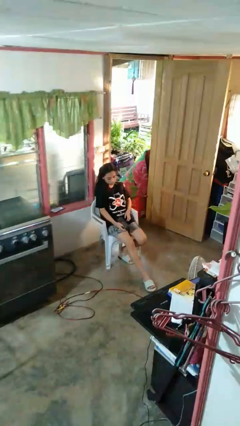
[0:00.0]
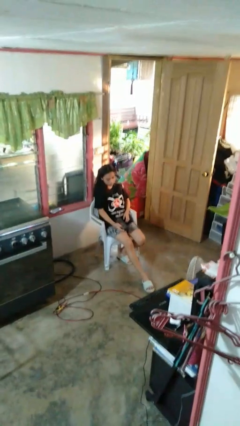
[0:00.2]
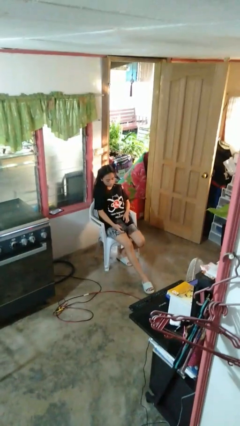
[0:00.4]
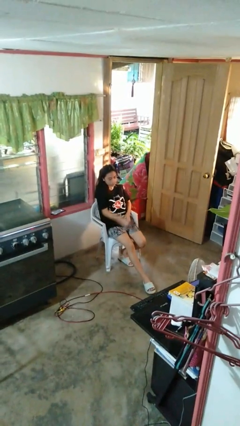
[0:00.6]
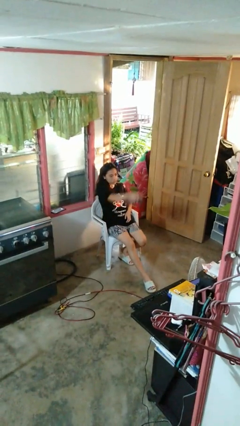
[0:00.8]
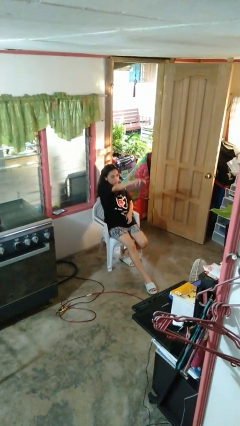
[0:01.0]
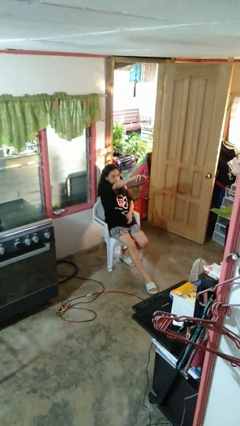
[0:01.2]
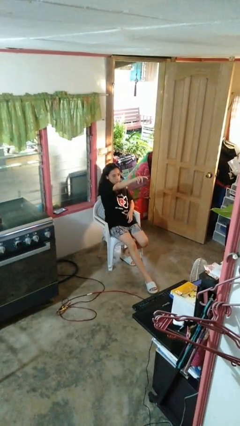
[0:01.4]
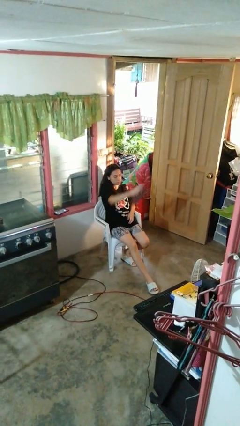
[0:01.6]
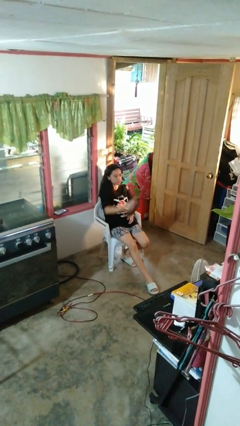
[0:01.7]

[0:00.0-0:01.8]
person uses television remote

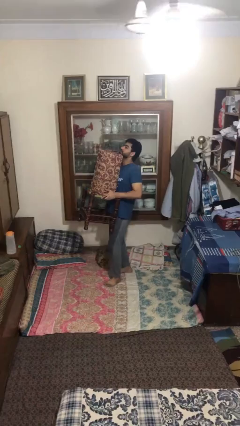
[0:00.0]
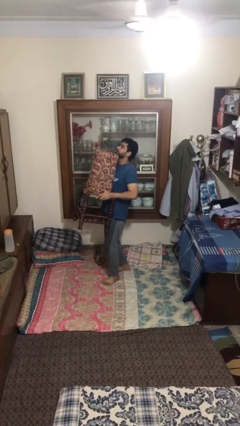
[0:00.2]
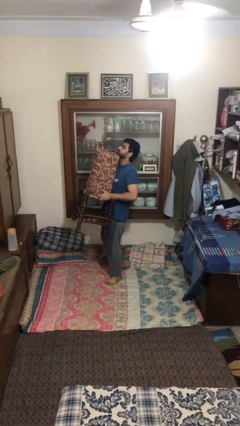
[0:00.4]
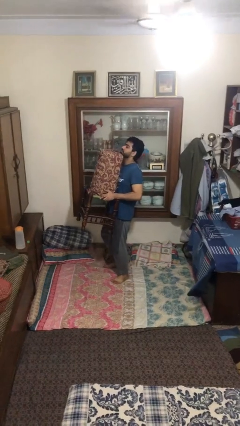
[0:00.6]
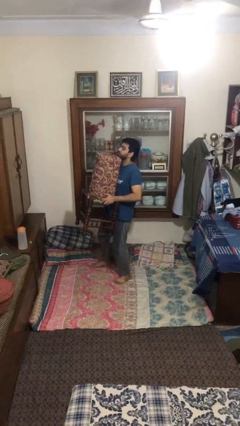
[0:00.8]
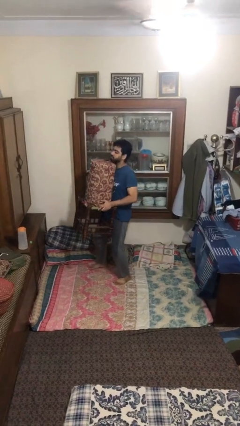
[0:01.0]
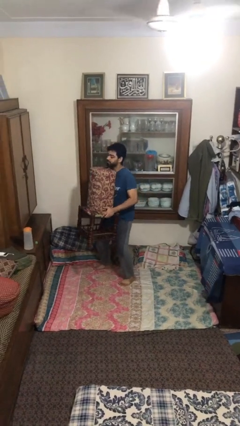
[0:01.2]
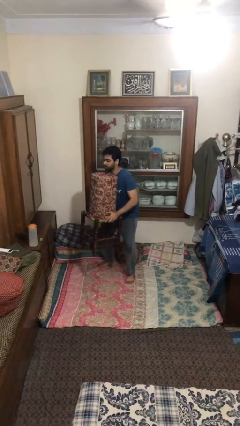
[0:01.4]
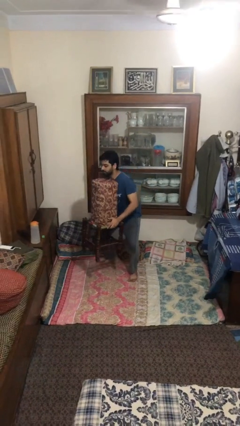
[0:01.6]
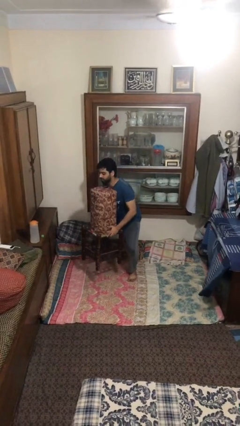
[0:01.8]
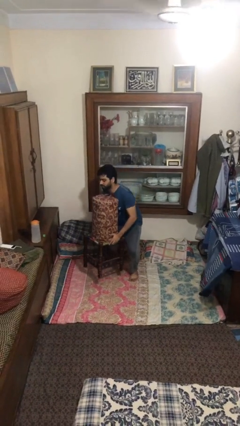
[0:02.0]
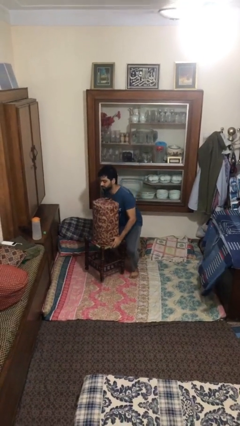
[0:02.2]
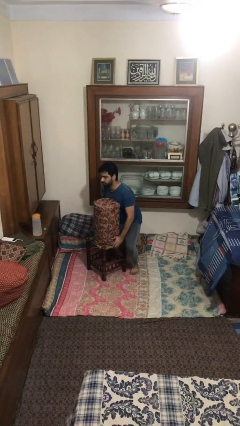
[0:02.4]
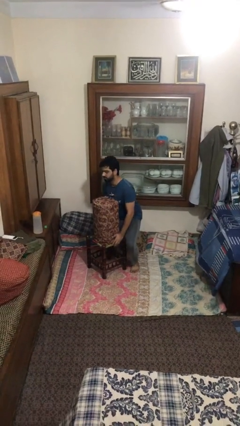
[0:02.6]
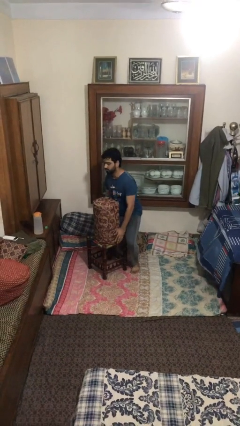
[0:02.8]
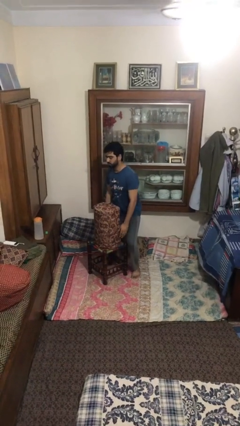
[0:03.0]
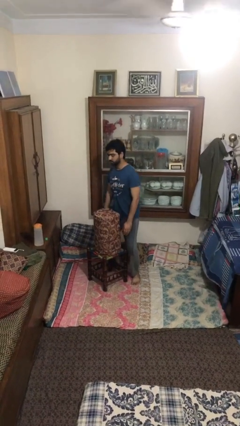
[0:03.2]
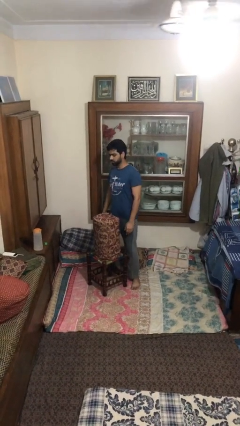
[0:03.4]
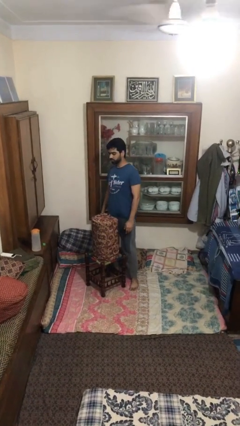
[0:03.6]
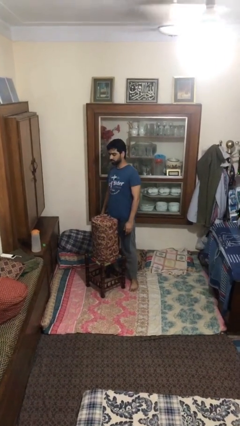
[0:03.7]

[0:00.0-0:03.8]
person puts down object on floor

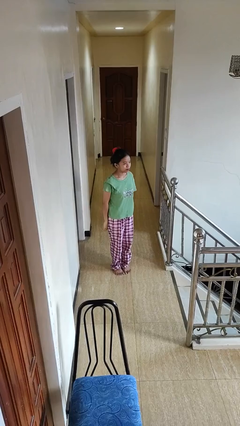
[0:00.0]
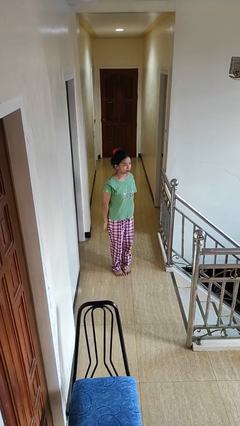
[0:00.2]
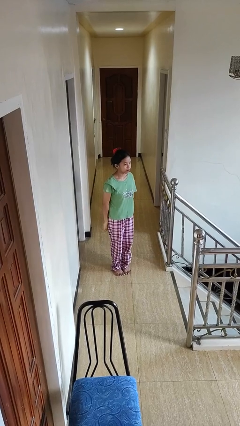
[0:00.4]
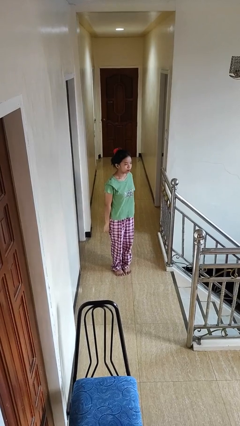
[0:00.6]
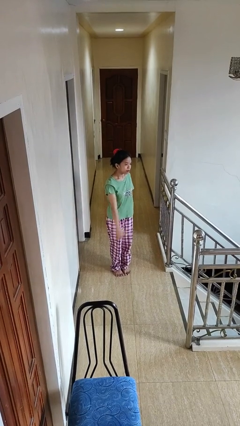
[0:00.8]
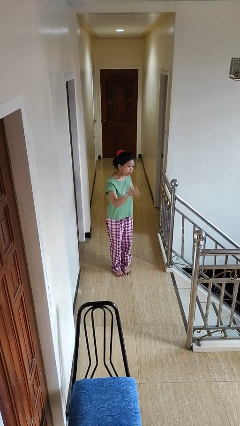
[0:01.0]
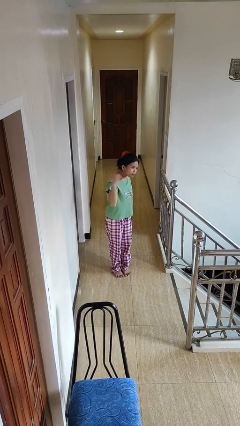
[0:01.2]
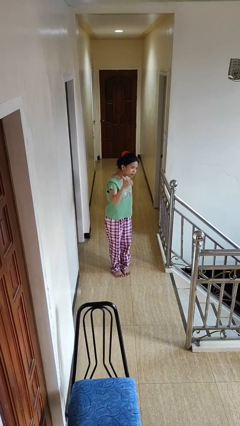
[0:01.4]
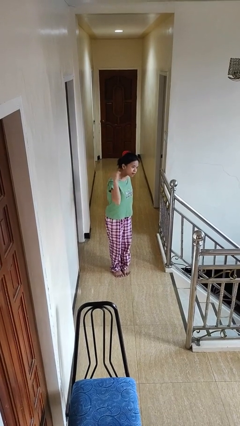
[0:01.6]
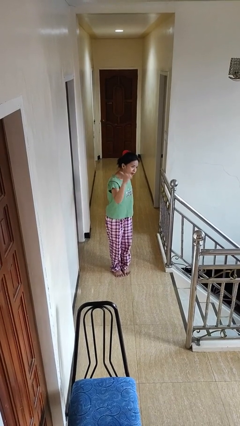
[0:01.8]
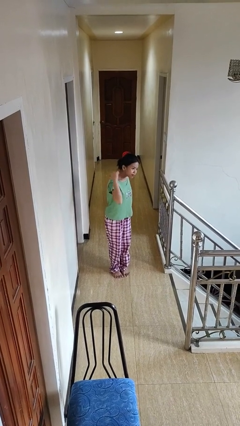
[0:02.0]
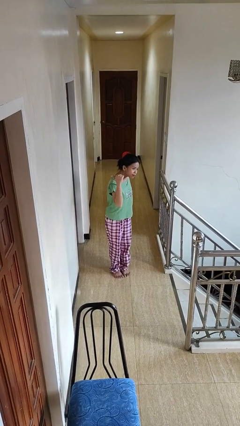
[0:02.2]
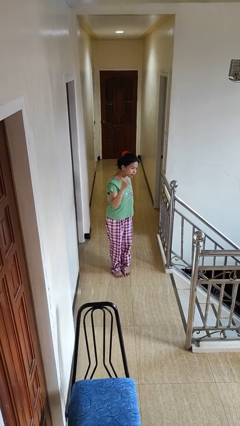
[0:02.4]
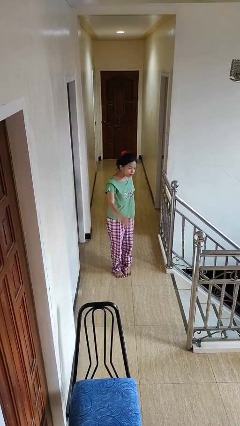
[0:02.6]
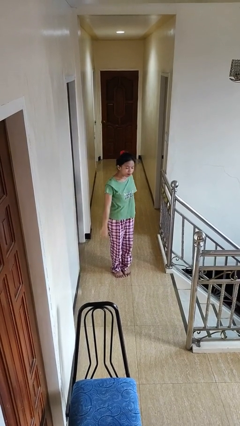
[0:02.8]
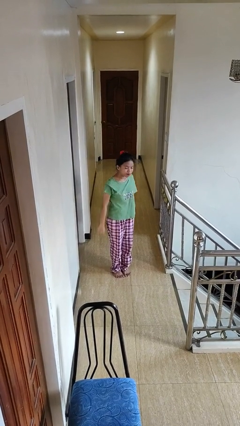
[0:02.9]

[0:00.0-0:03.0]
person gestures behind me

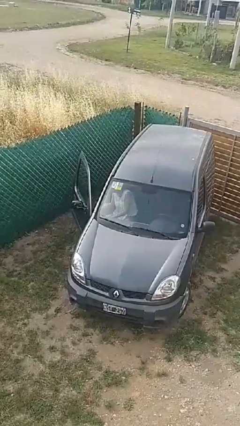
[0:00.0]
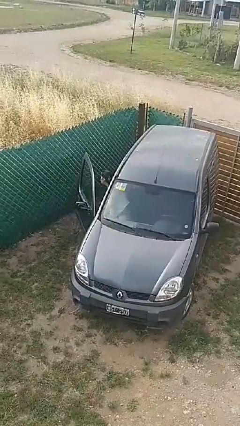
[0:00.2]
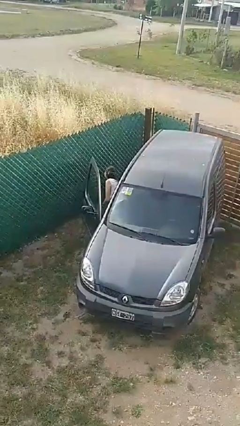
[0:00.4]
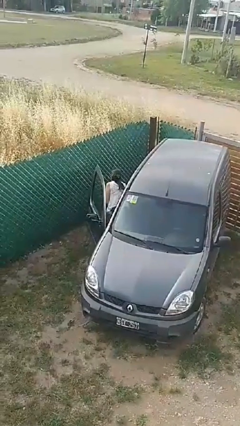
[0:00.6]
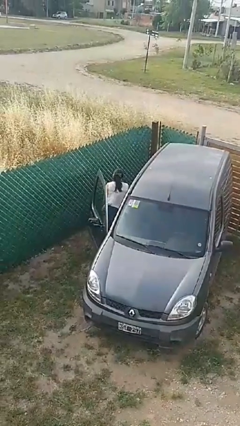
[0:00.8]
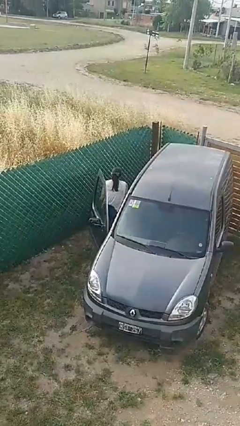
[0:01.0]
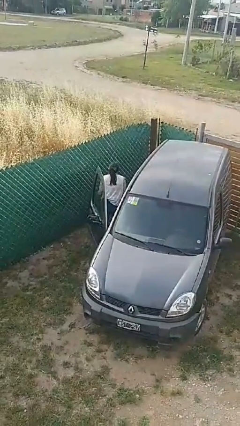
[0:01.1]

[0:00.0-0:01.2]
person exits car

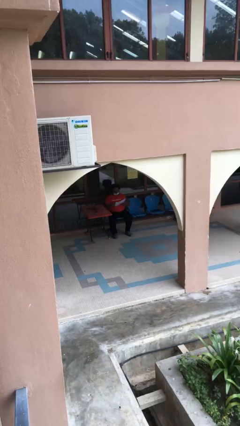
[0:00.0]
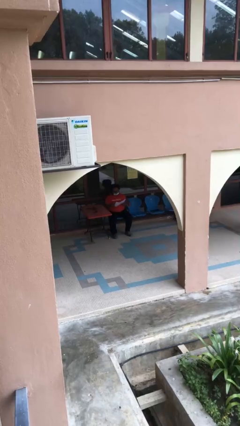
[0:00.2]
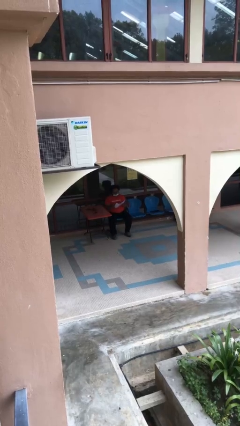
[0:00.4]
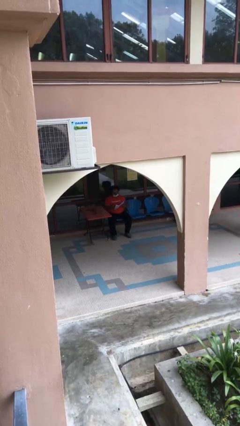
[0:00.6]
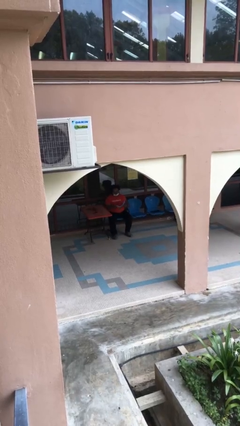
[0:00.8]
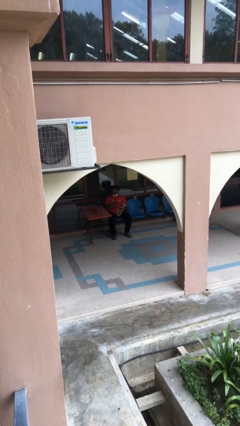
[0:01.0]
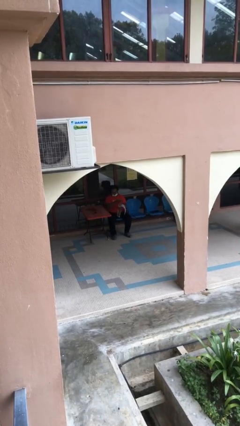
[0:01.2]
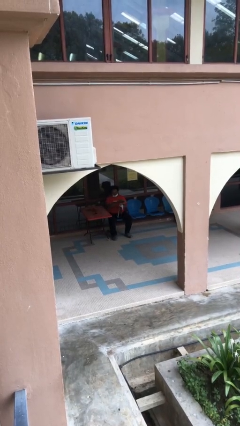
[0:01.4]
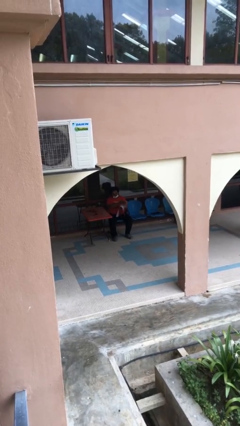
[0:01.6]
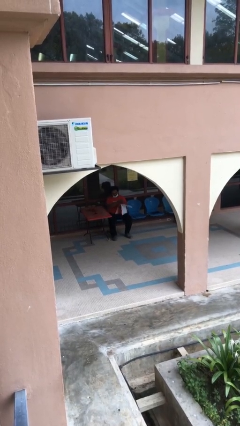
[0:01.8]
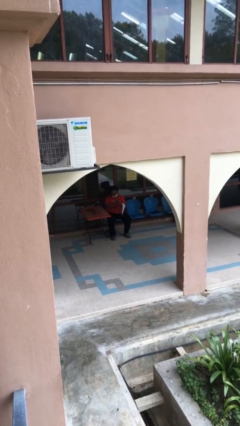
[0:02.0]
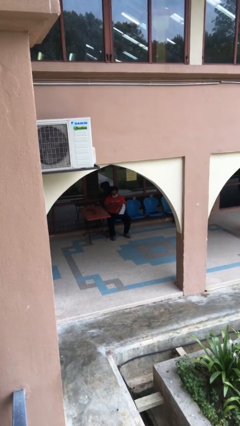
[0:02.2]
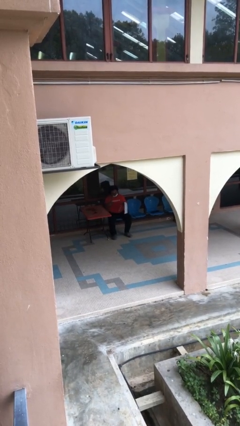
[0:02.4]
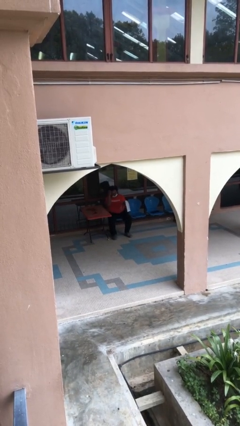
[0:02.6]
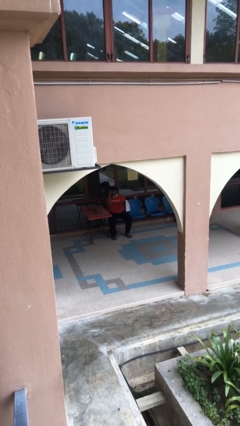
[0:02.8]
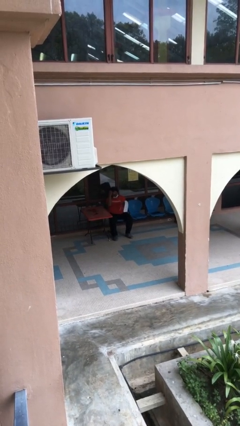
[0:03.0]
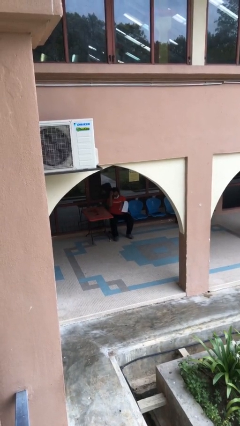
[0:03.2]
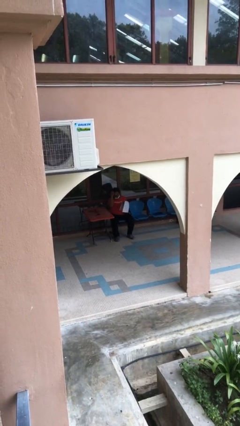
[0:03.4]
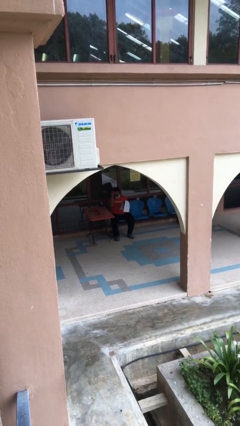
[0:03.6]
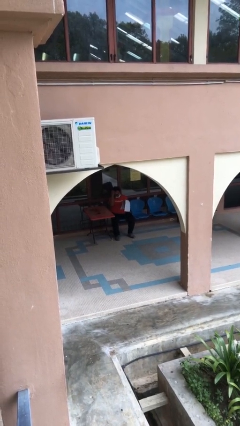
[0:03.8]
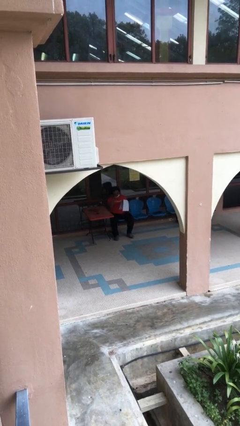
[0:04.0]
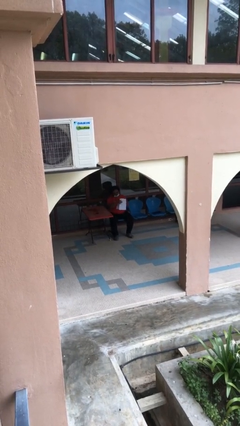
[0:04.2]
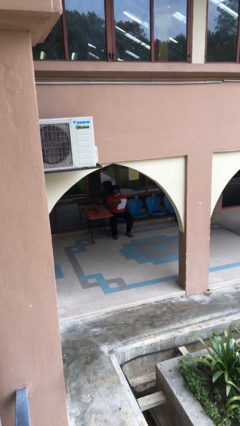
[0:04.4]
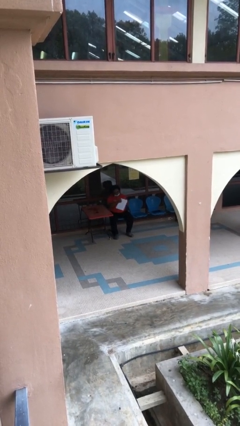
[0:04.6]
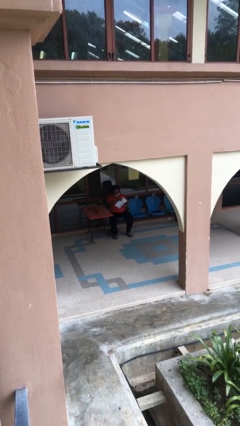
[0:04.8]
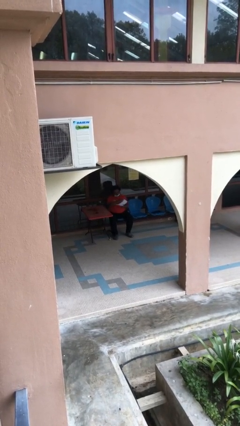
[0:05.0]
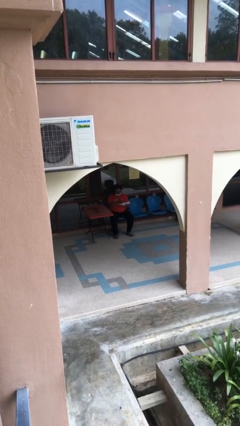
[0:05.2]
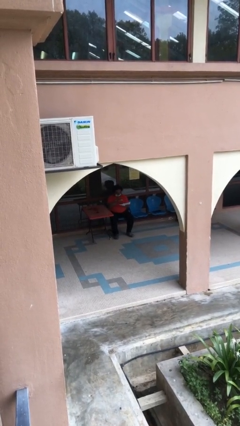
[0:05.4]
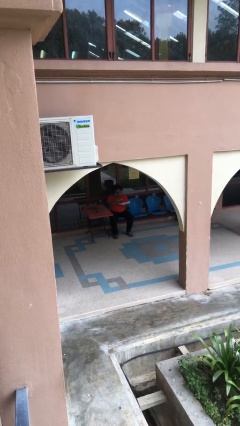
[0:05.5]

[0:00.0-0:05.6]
person reads document

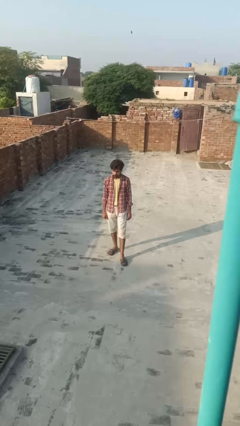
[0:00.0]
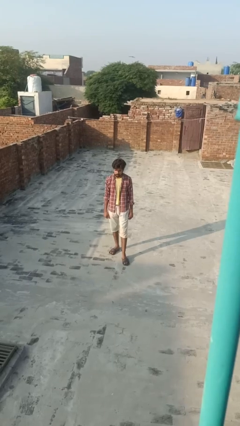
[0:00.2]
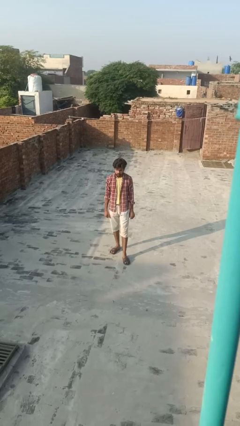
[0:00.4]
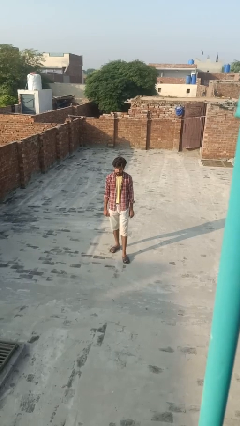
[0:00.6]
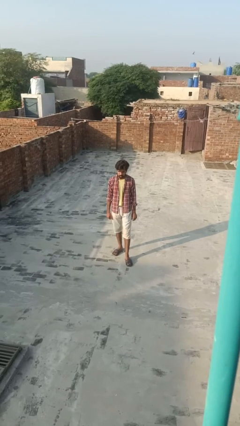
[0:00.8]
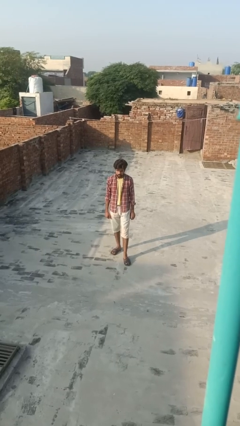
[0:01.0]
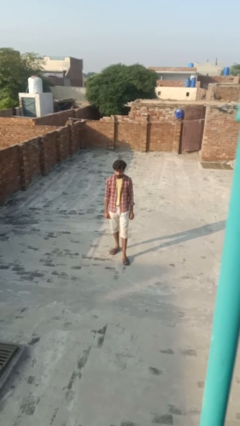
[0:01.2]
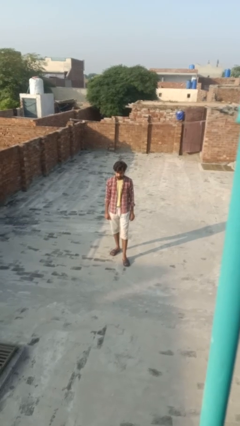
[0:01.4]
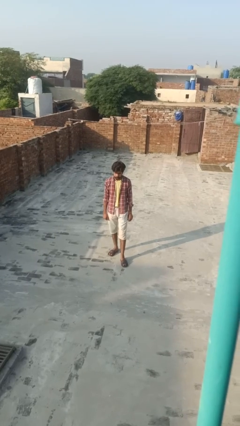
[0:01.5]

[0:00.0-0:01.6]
person stands up

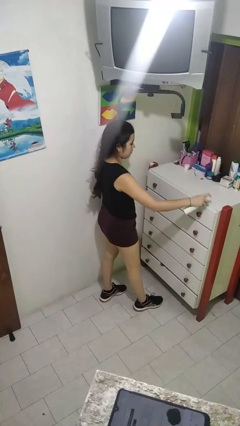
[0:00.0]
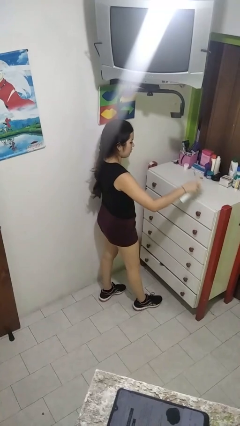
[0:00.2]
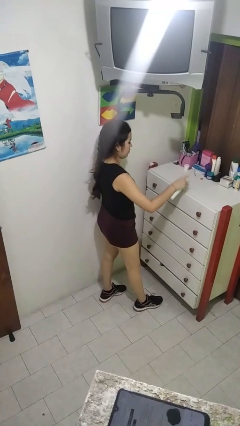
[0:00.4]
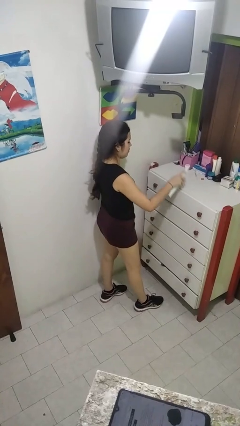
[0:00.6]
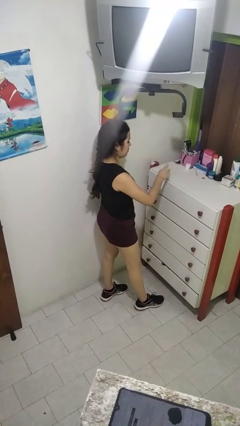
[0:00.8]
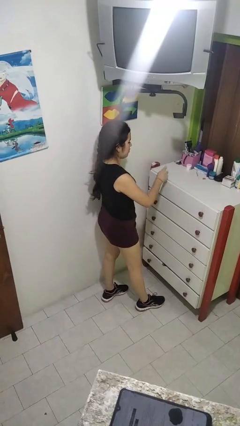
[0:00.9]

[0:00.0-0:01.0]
person sprays from bottle
